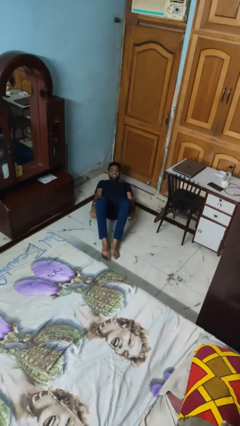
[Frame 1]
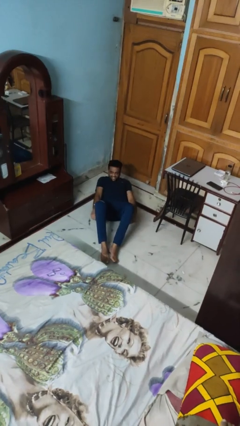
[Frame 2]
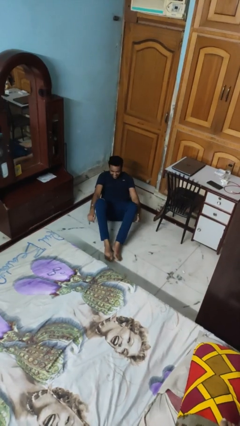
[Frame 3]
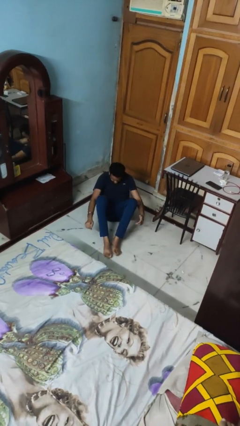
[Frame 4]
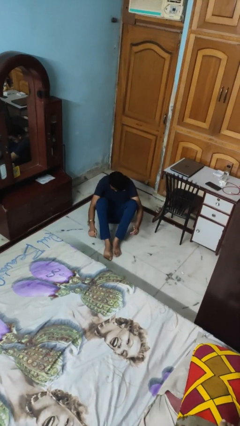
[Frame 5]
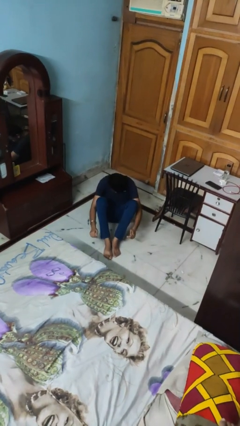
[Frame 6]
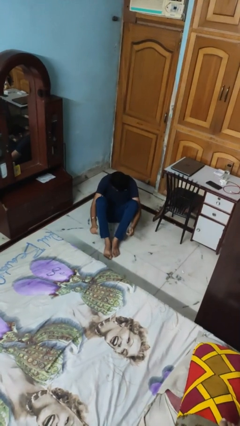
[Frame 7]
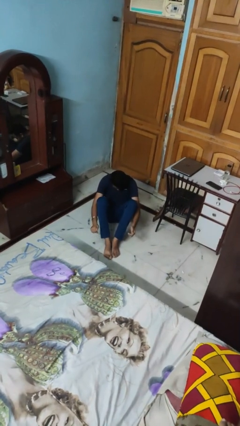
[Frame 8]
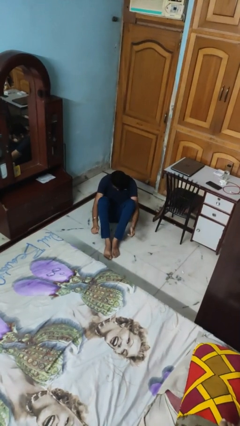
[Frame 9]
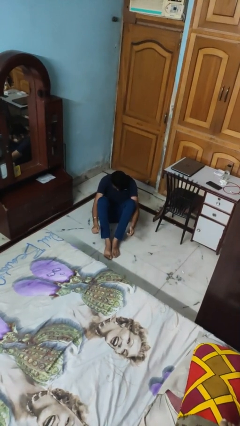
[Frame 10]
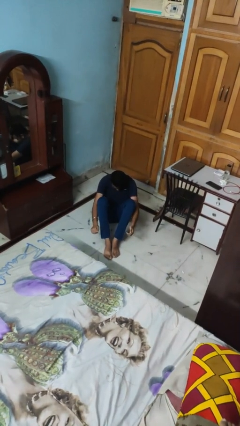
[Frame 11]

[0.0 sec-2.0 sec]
person exercises with situp

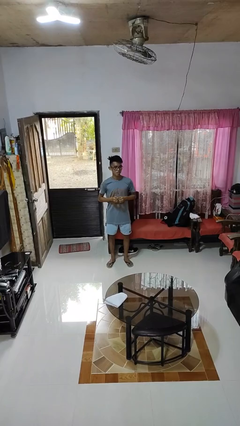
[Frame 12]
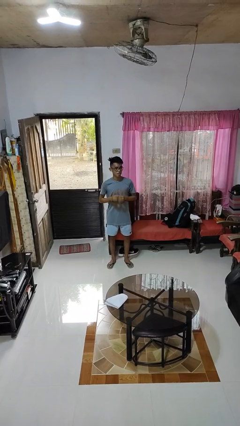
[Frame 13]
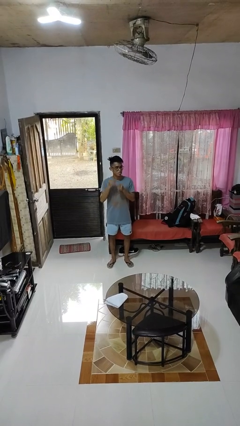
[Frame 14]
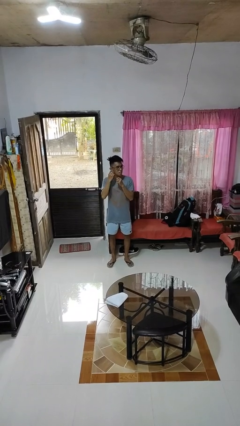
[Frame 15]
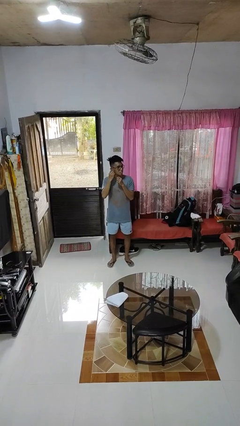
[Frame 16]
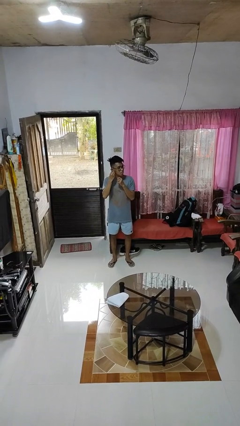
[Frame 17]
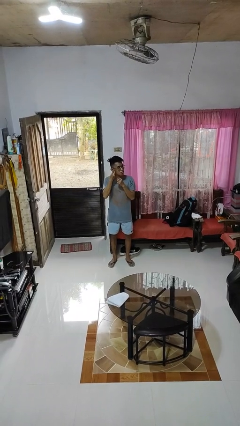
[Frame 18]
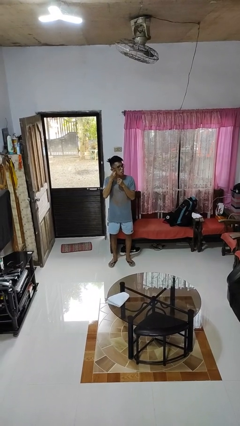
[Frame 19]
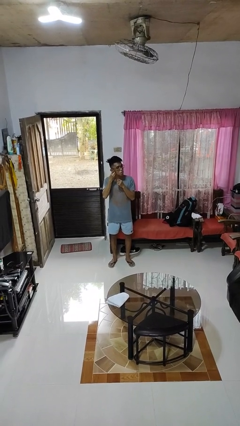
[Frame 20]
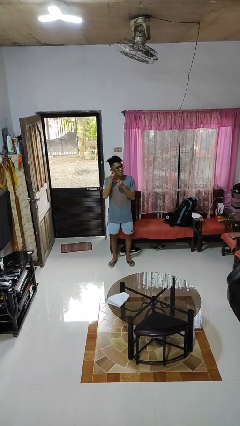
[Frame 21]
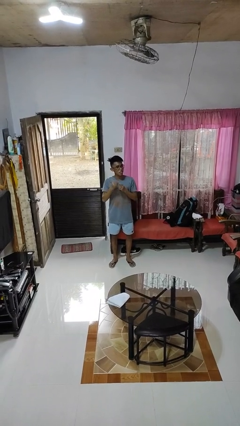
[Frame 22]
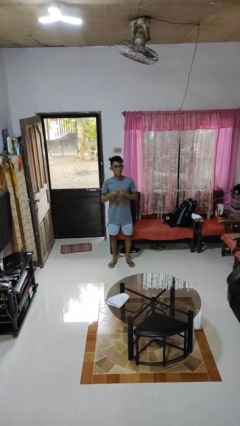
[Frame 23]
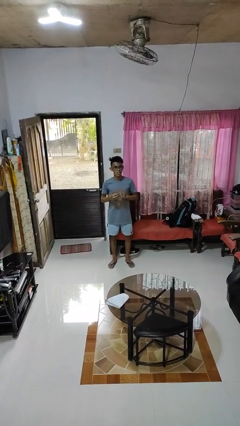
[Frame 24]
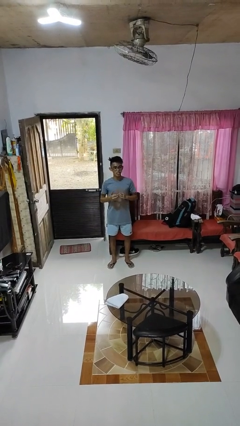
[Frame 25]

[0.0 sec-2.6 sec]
person takes off earrings

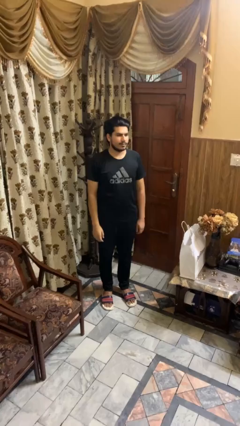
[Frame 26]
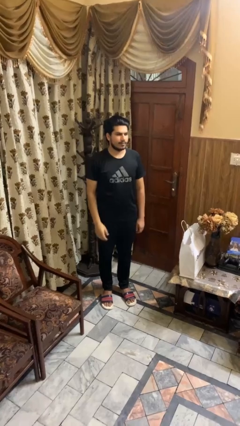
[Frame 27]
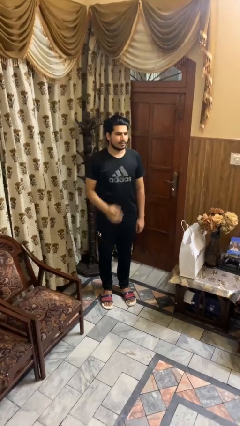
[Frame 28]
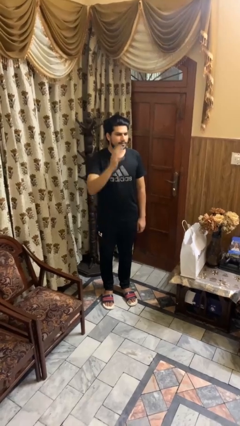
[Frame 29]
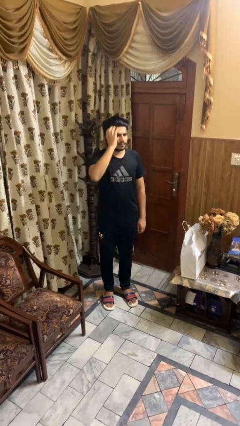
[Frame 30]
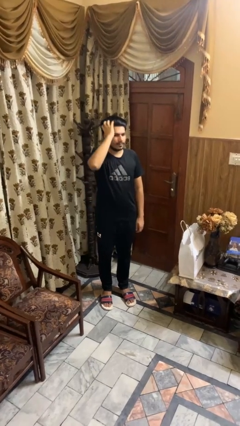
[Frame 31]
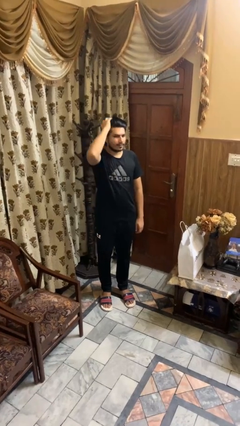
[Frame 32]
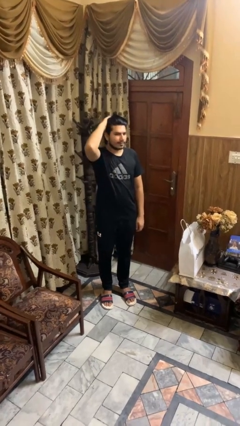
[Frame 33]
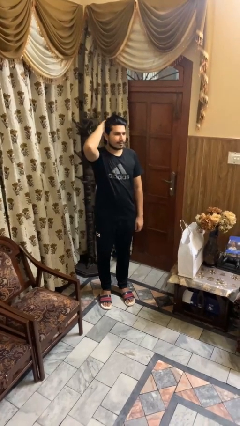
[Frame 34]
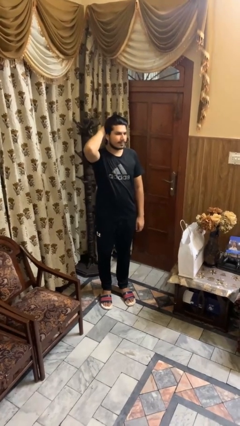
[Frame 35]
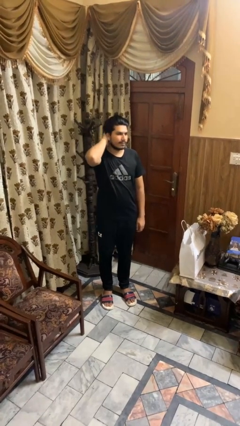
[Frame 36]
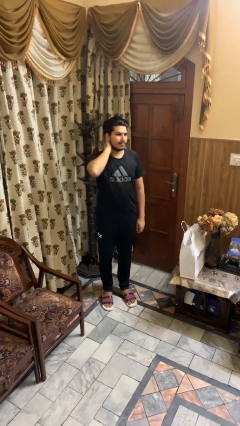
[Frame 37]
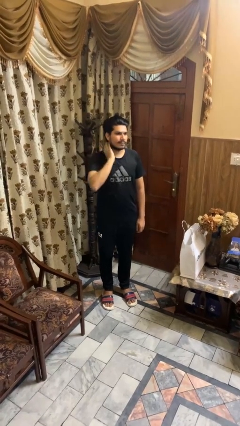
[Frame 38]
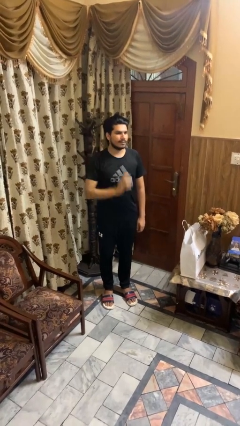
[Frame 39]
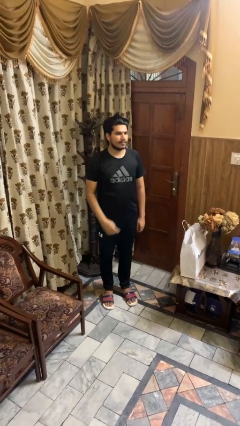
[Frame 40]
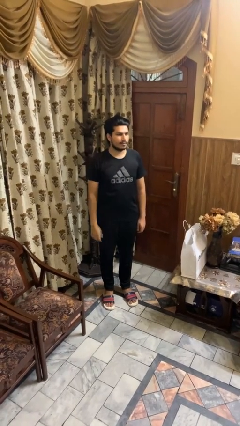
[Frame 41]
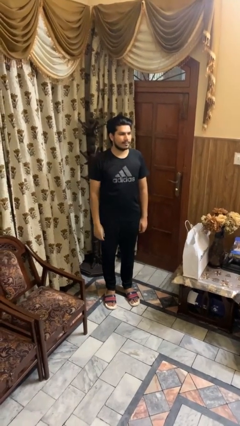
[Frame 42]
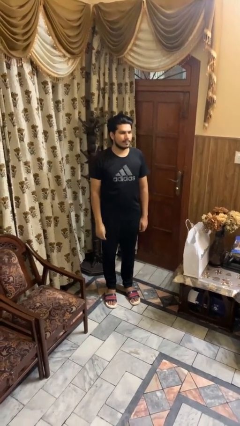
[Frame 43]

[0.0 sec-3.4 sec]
person strokes hair

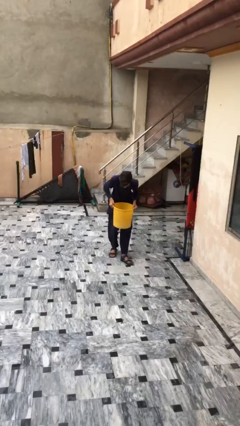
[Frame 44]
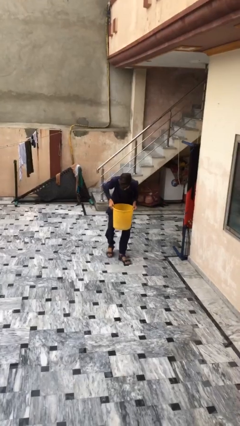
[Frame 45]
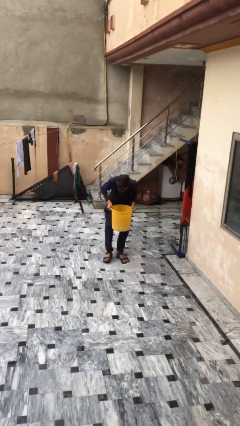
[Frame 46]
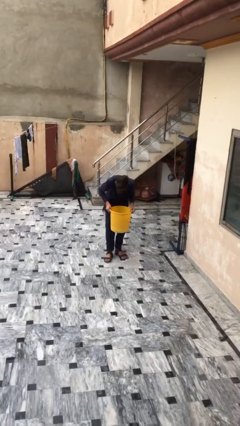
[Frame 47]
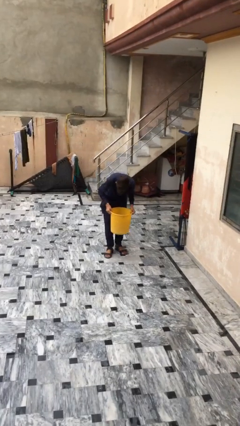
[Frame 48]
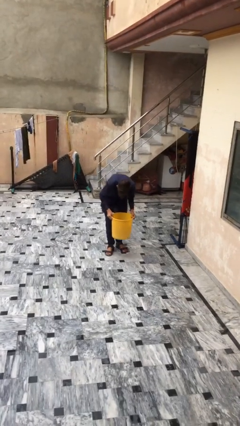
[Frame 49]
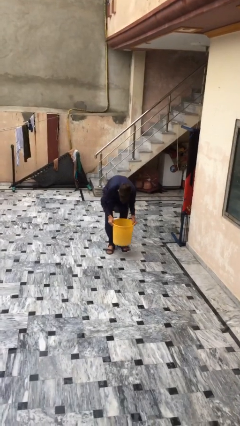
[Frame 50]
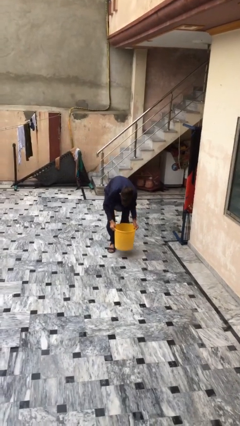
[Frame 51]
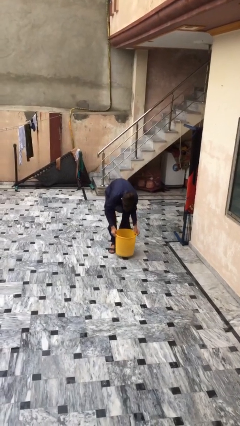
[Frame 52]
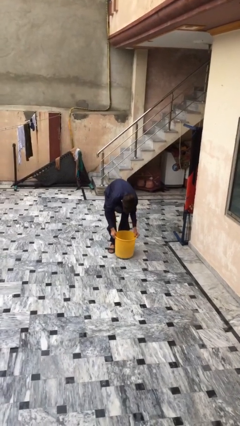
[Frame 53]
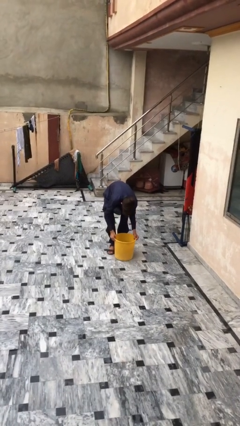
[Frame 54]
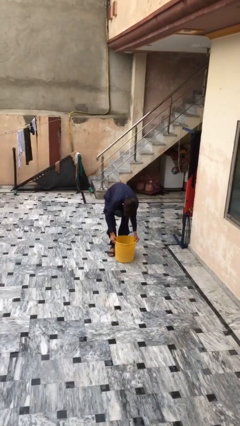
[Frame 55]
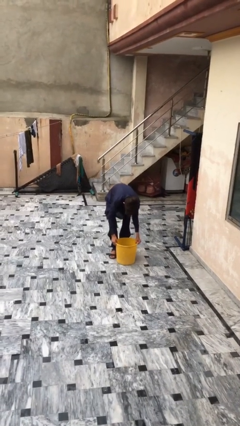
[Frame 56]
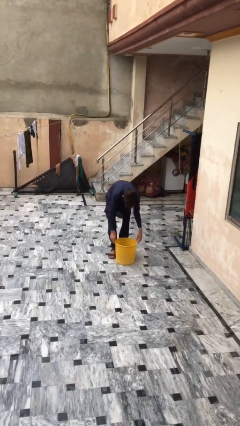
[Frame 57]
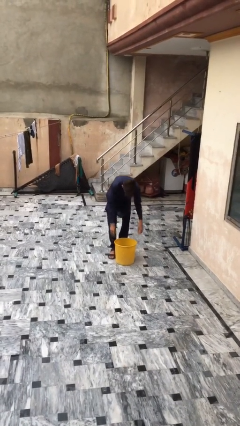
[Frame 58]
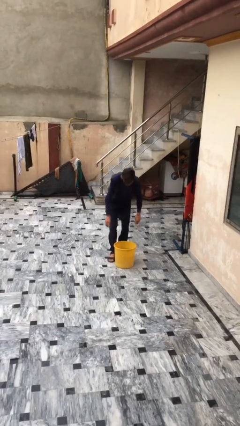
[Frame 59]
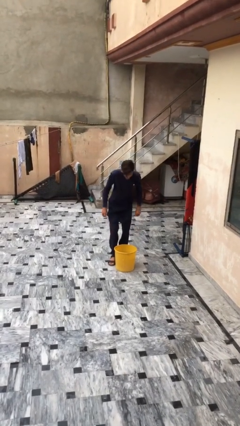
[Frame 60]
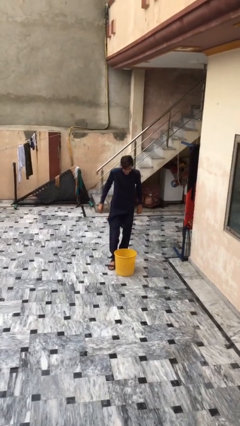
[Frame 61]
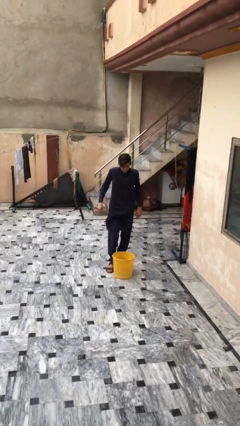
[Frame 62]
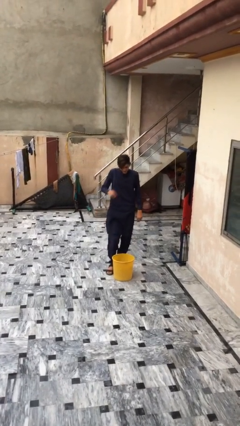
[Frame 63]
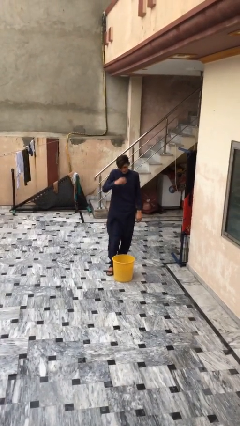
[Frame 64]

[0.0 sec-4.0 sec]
person puts down object on floor

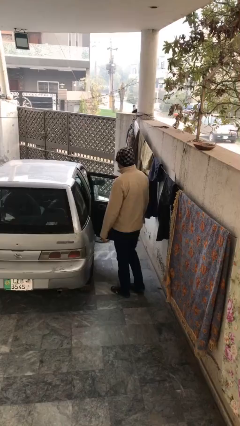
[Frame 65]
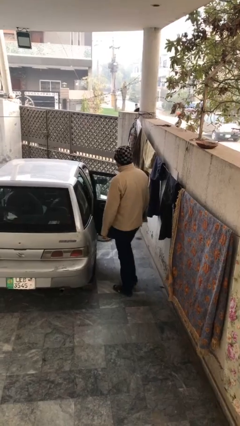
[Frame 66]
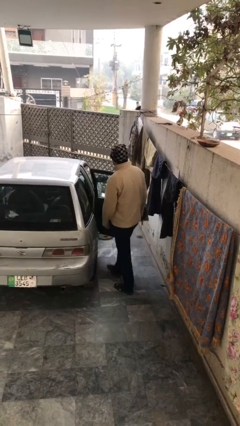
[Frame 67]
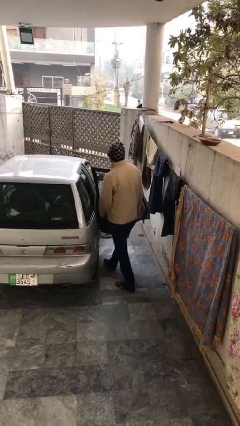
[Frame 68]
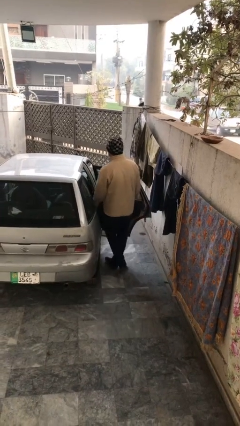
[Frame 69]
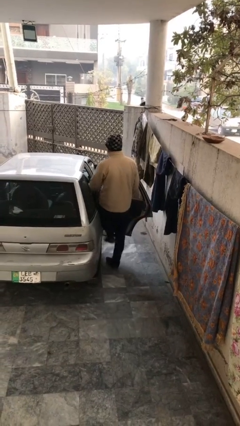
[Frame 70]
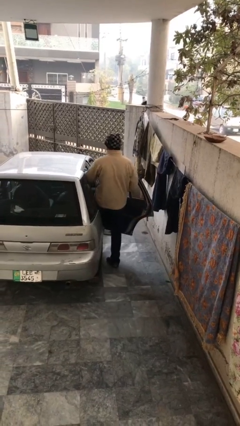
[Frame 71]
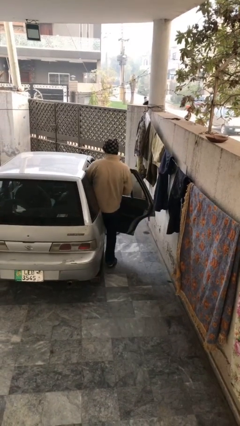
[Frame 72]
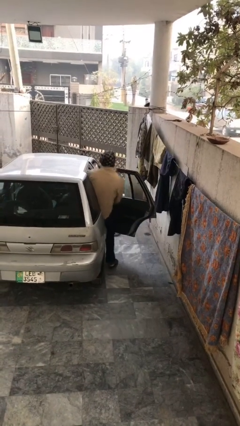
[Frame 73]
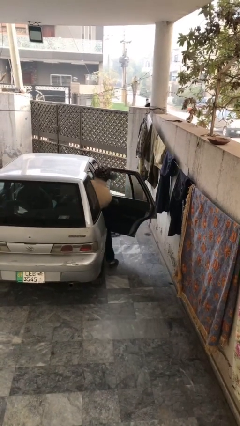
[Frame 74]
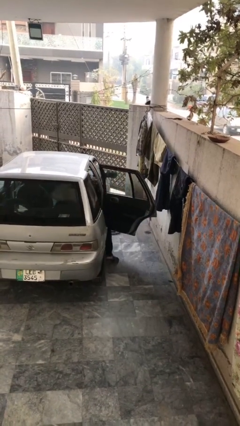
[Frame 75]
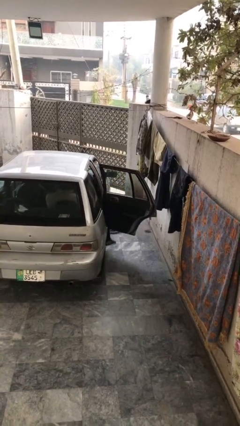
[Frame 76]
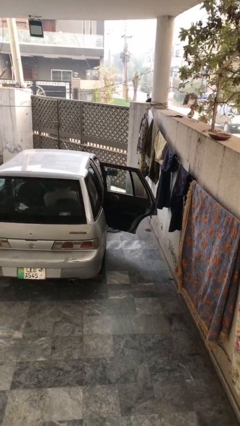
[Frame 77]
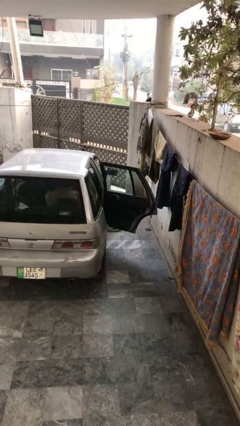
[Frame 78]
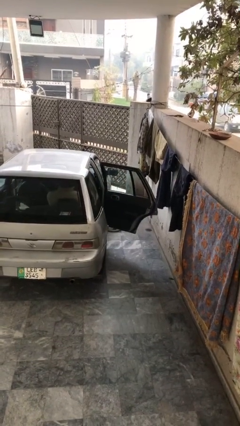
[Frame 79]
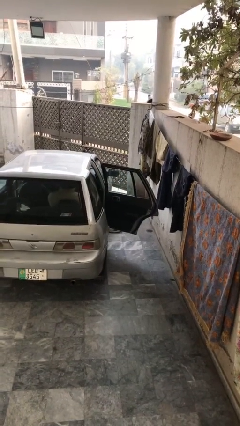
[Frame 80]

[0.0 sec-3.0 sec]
person enters car

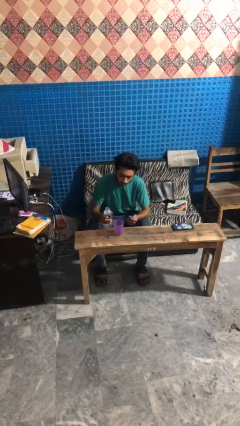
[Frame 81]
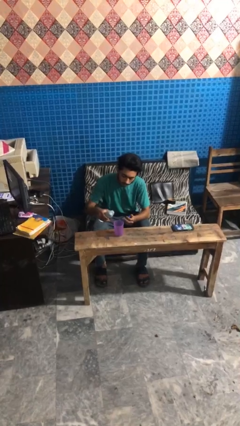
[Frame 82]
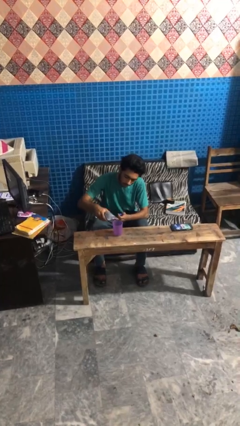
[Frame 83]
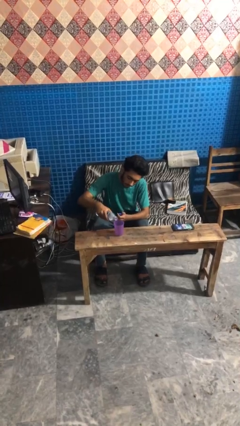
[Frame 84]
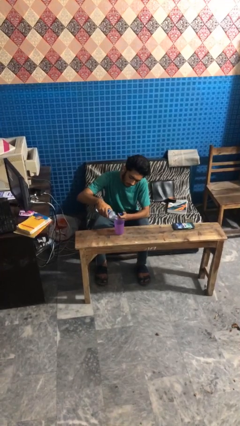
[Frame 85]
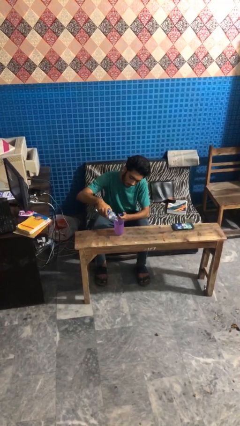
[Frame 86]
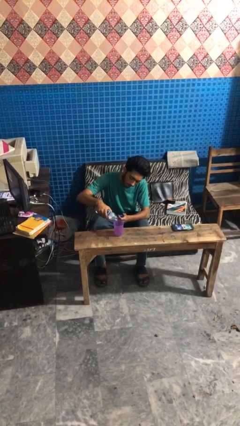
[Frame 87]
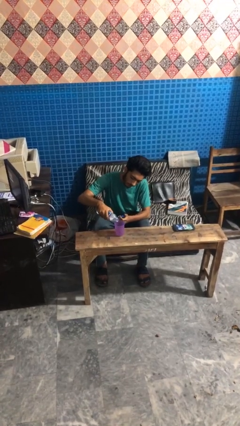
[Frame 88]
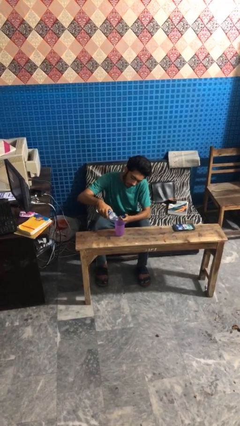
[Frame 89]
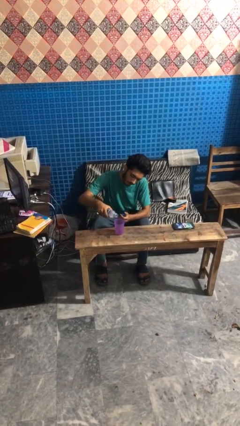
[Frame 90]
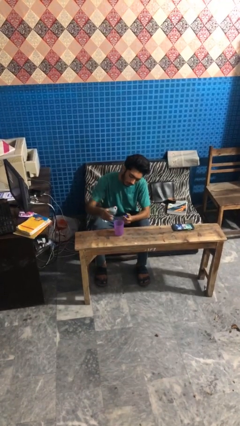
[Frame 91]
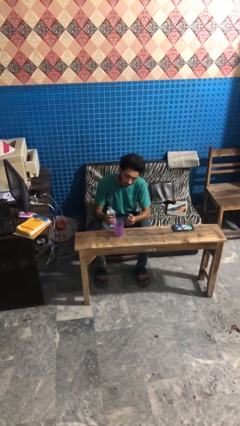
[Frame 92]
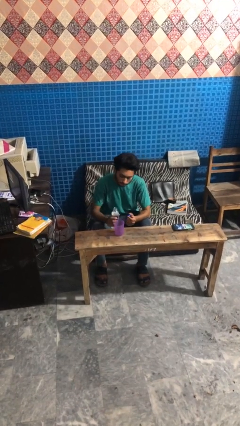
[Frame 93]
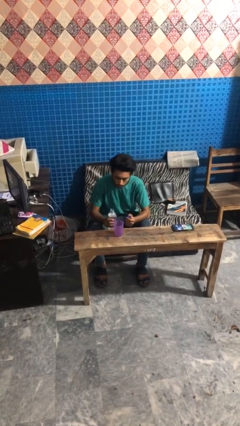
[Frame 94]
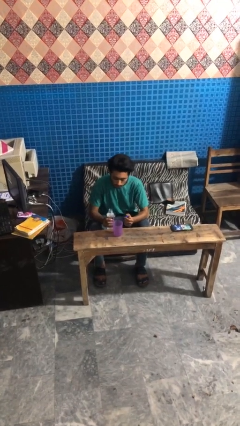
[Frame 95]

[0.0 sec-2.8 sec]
person pours liquid into cup
